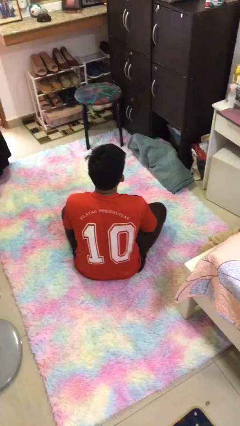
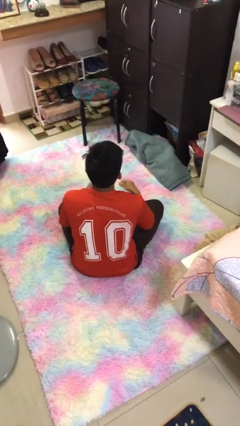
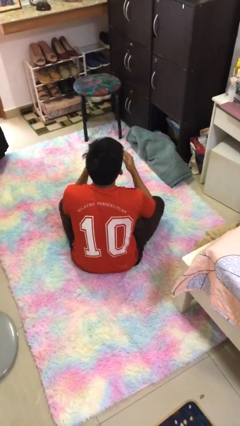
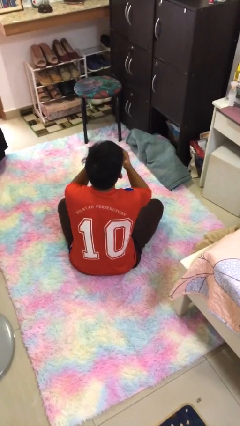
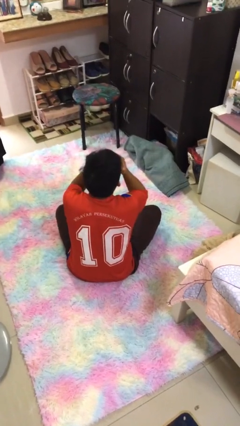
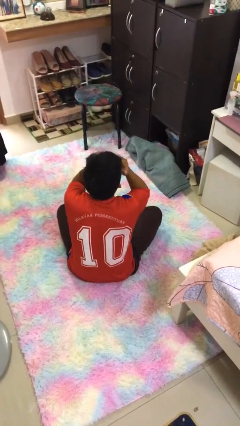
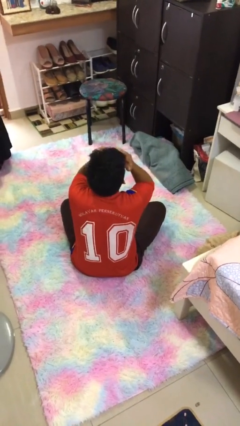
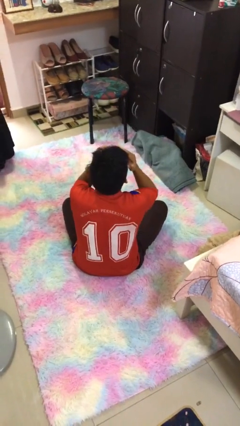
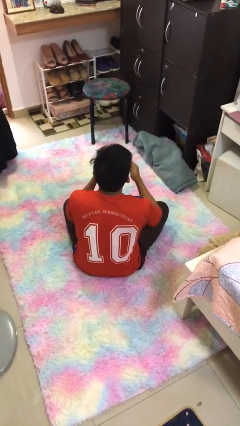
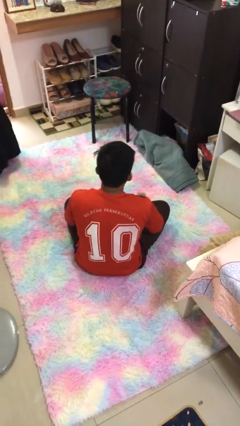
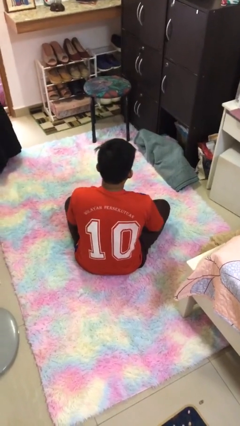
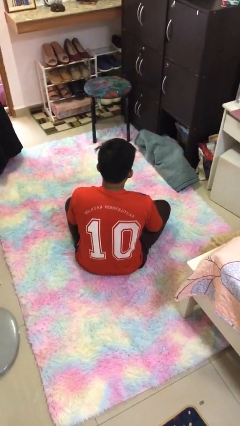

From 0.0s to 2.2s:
person covers face with hands

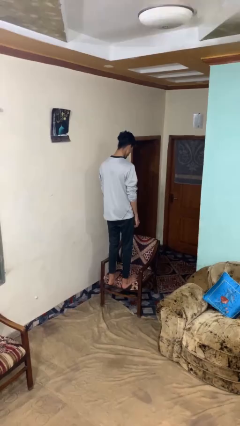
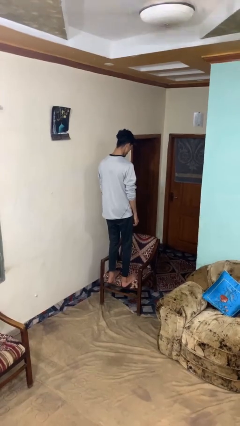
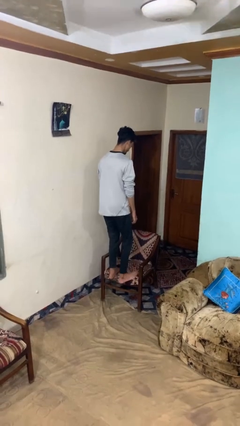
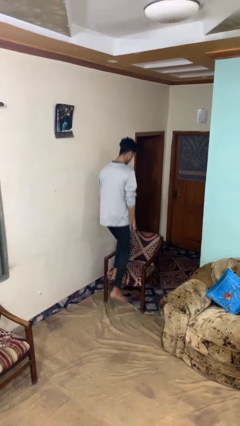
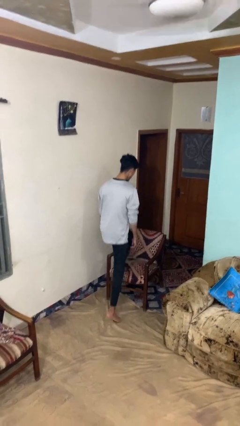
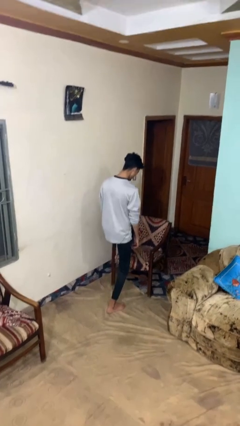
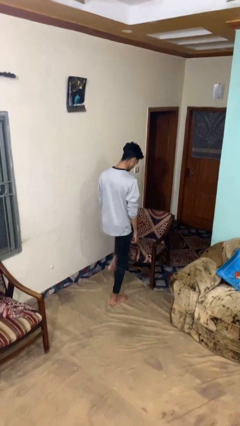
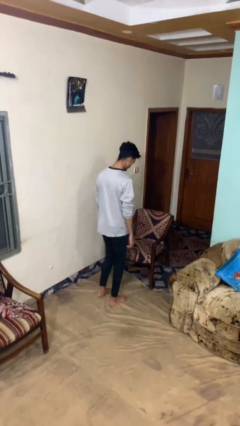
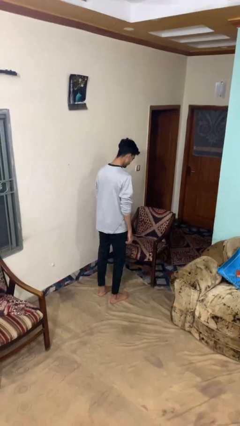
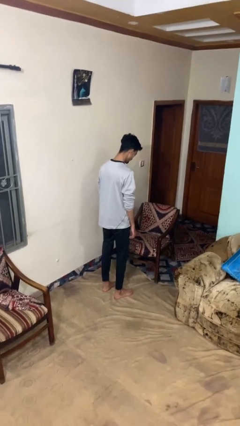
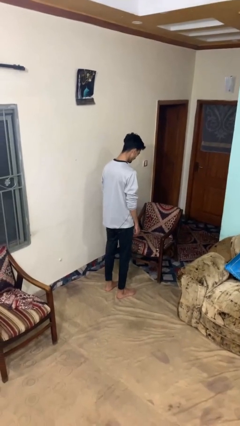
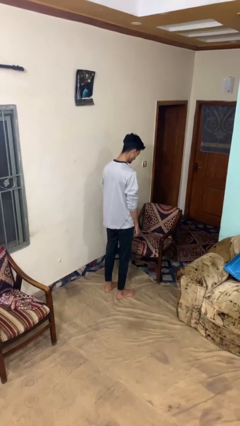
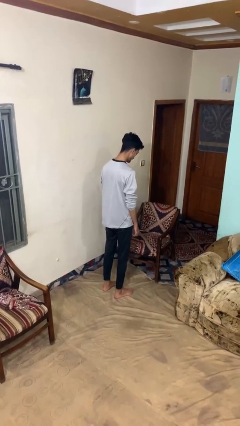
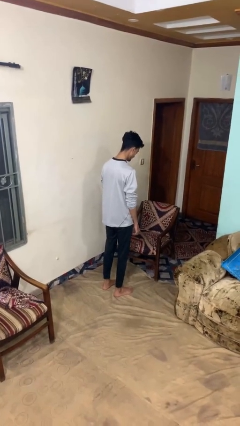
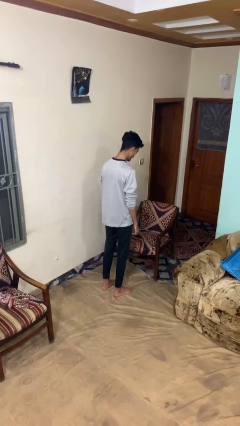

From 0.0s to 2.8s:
person climbs off chair

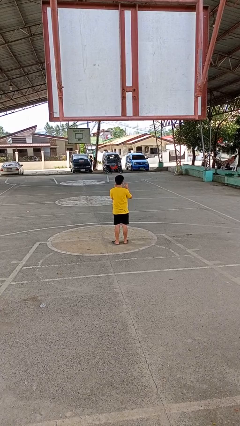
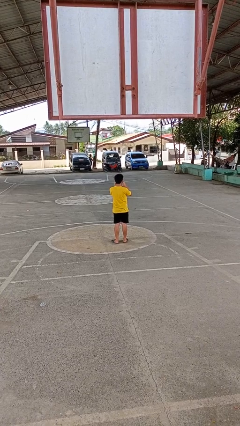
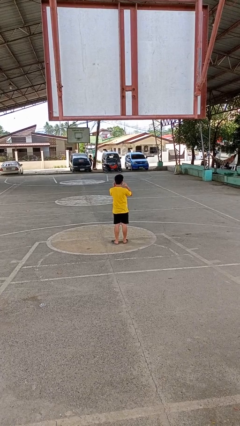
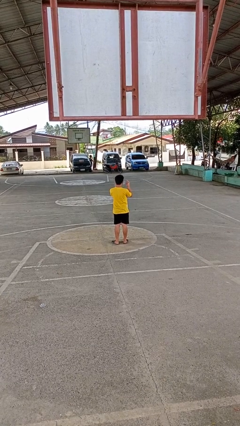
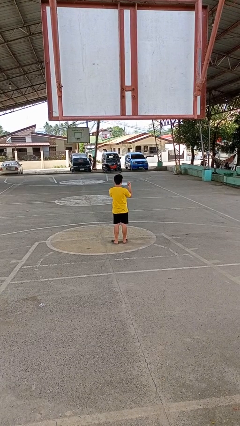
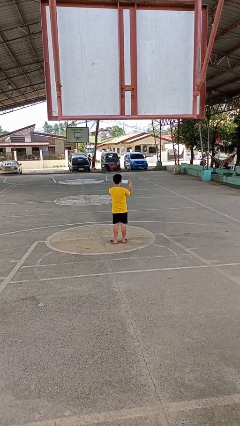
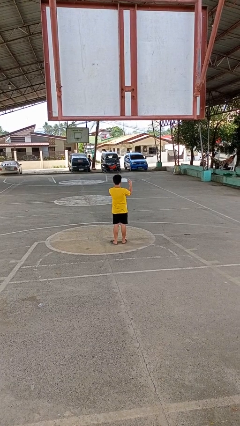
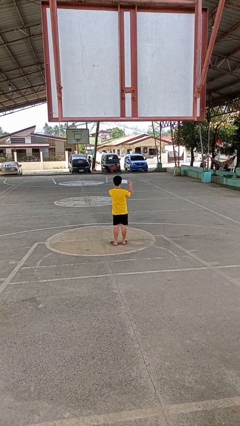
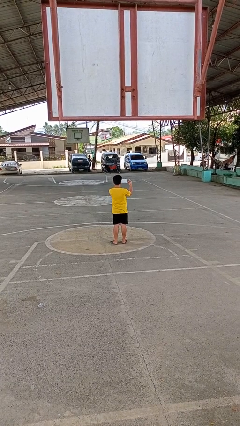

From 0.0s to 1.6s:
person takes off facemask

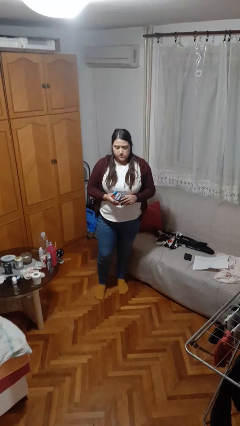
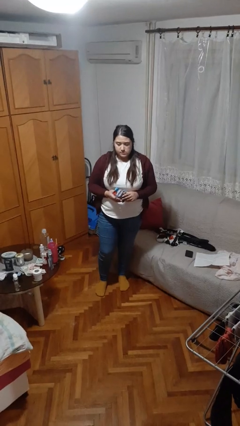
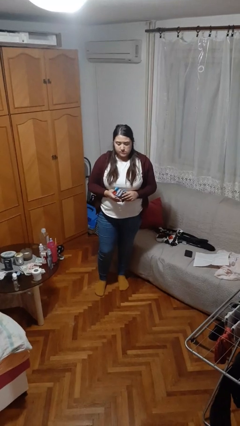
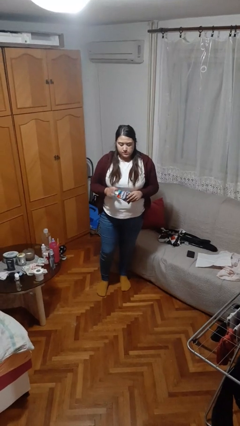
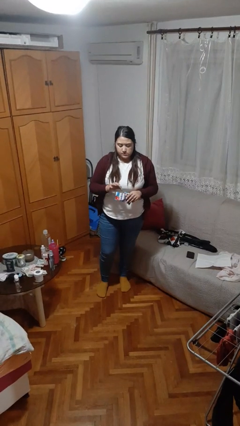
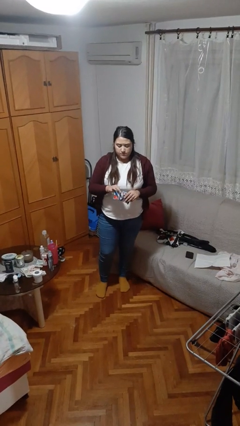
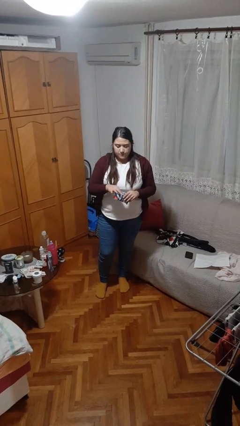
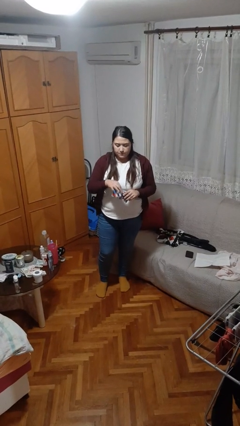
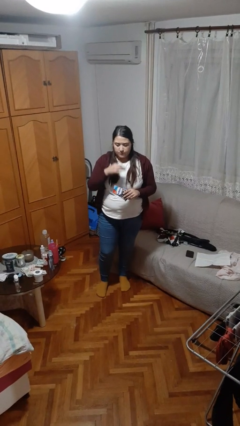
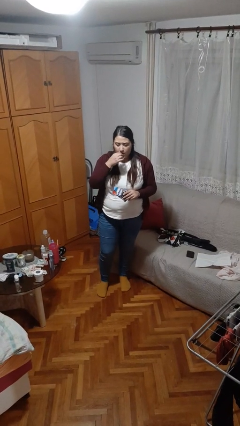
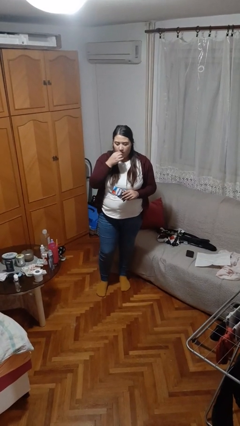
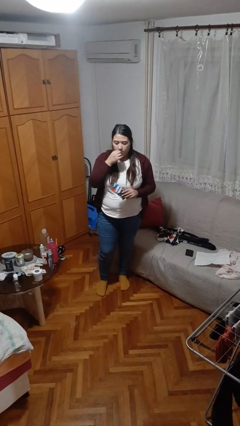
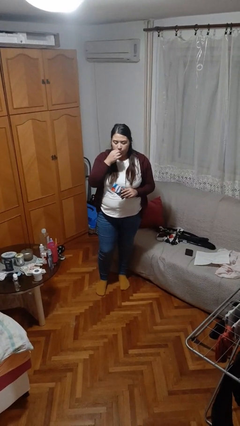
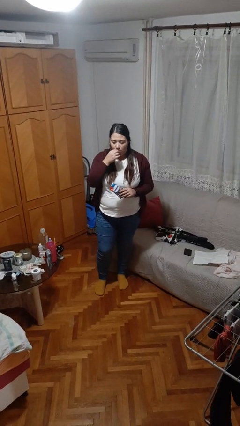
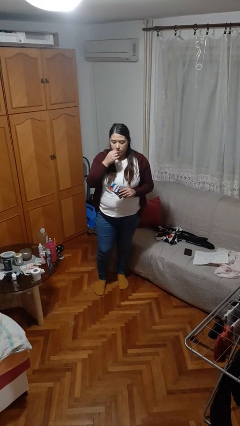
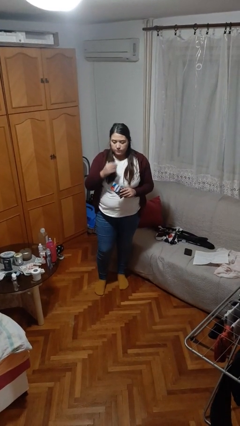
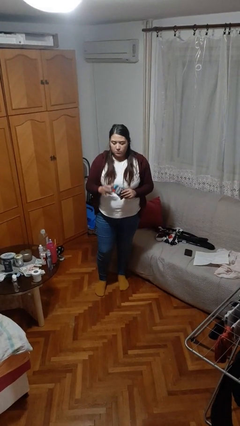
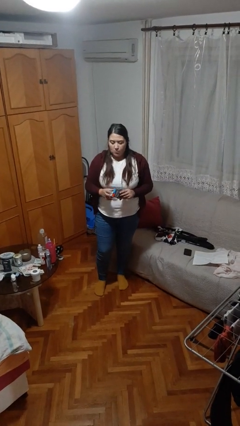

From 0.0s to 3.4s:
person eats snack from bag

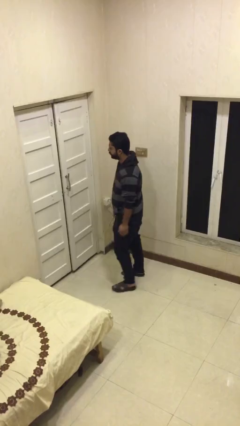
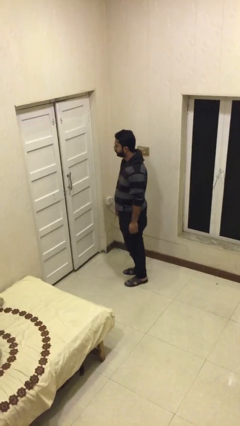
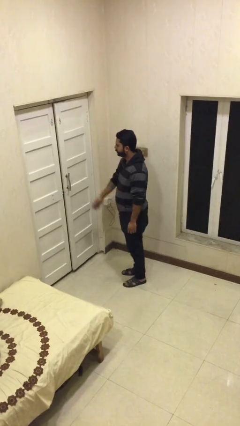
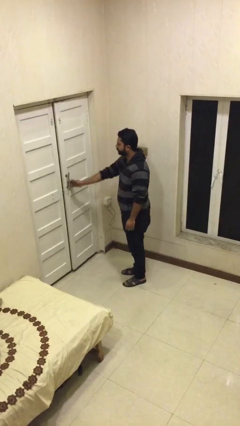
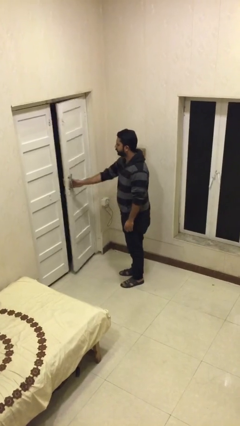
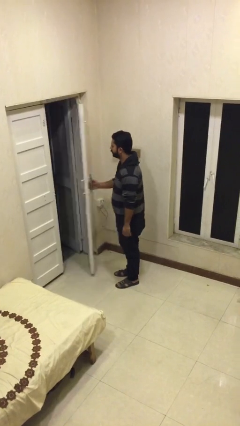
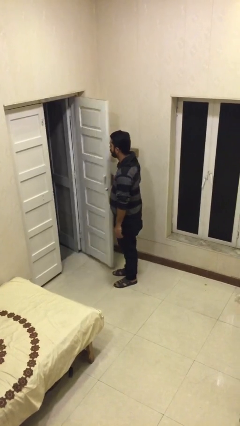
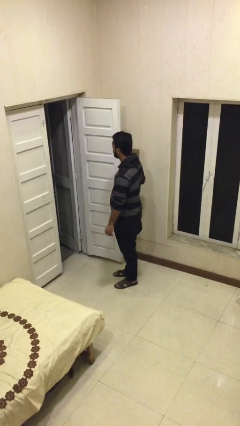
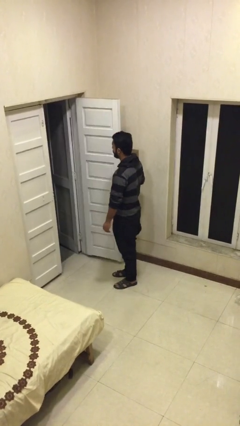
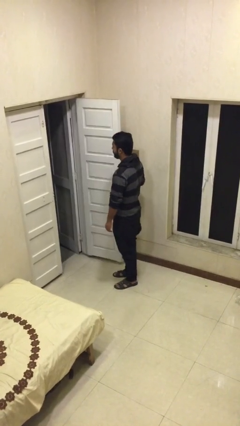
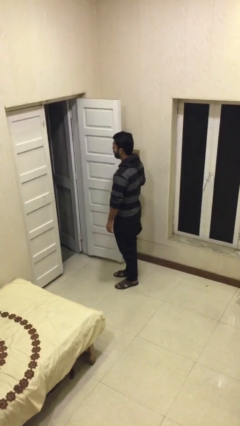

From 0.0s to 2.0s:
person opens facility door

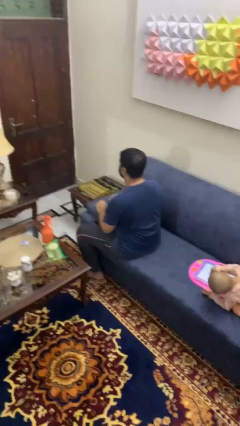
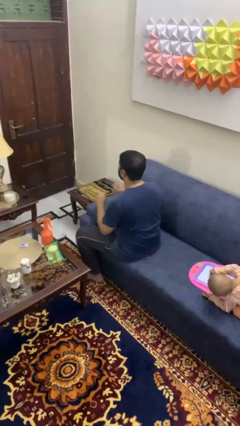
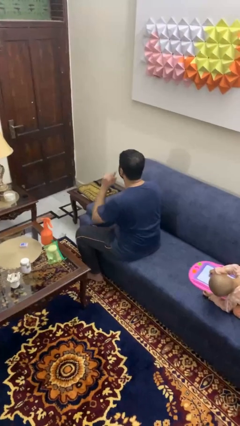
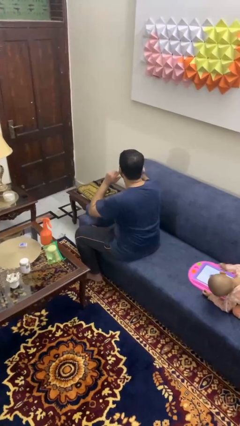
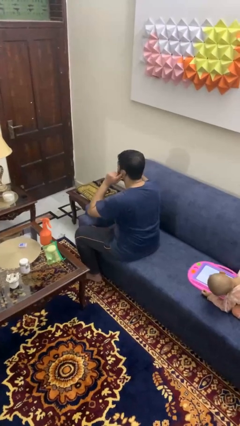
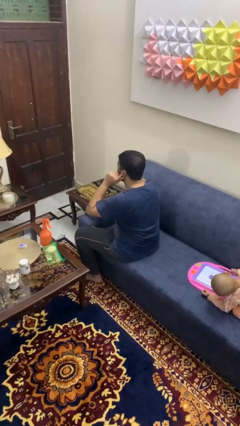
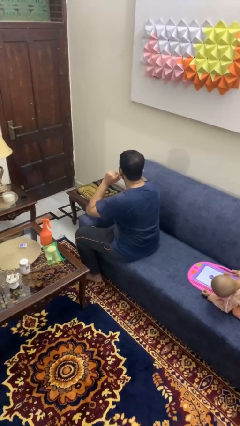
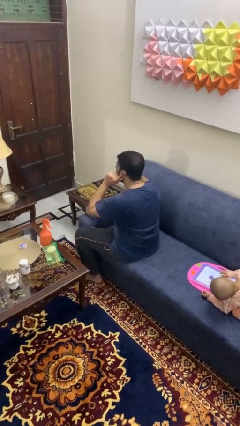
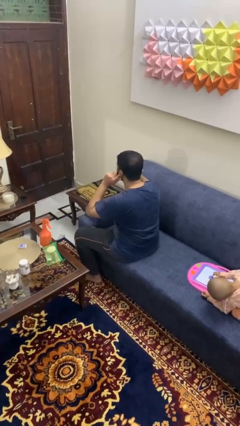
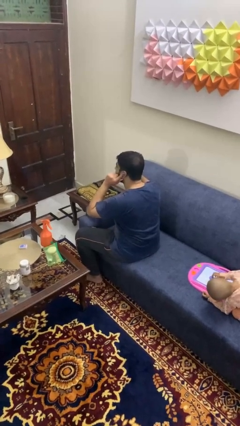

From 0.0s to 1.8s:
person puts fingers in ear

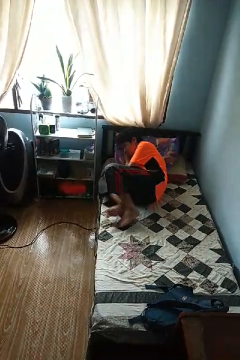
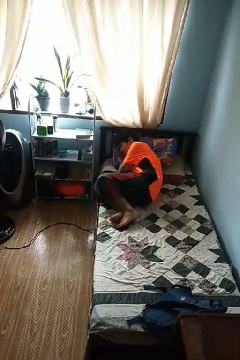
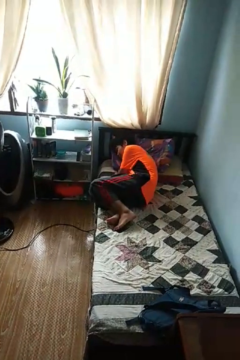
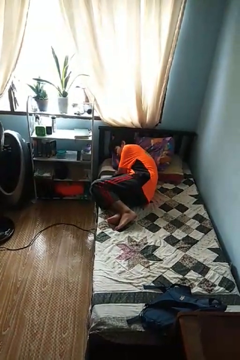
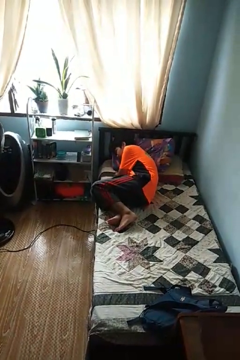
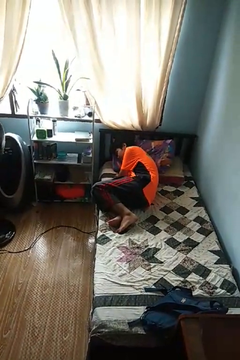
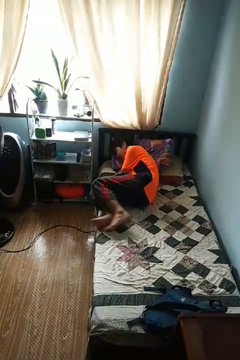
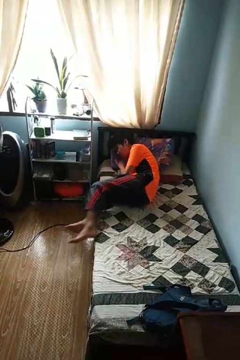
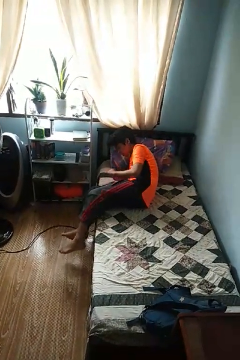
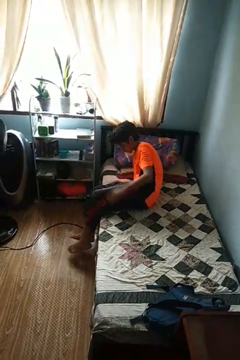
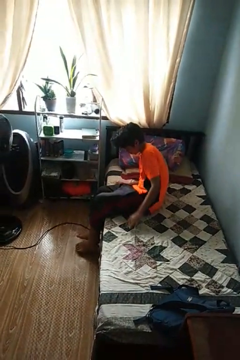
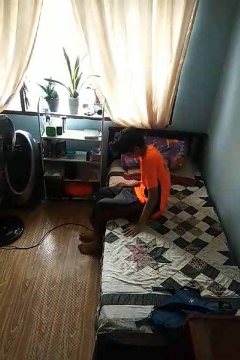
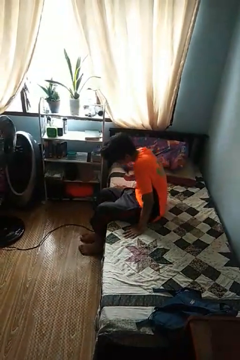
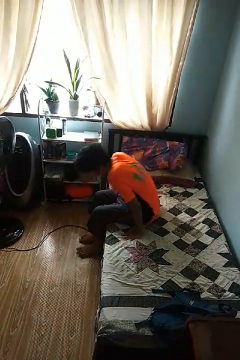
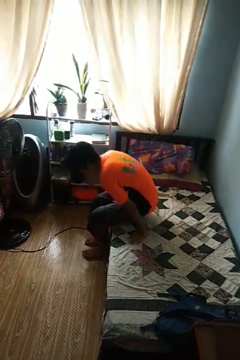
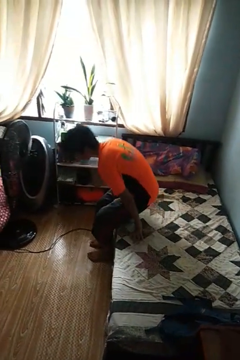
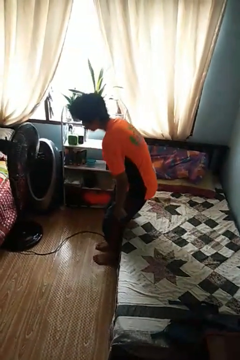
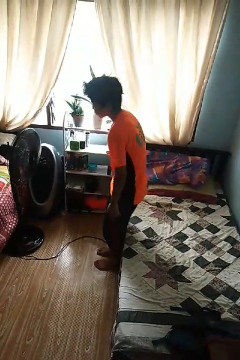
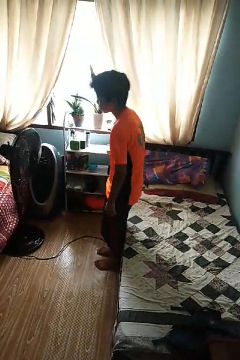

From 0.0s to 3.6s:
person stands up

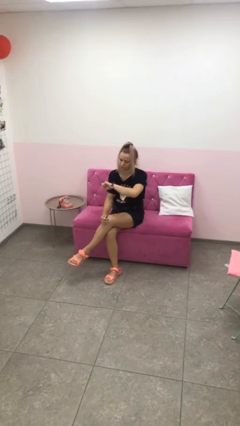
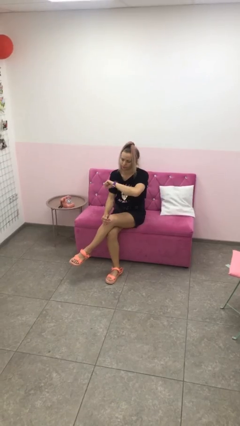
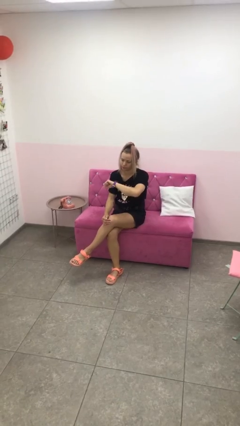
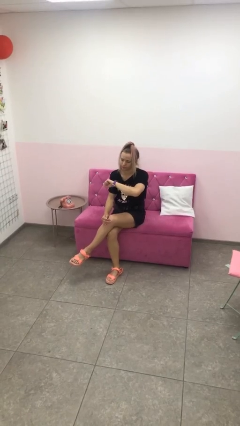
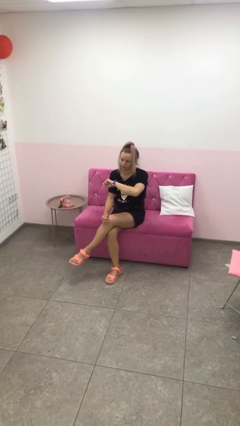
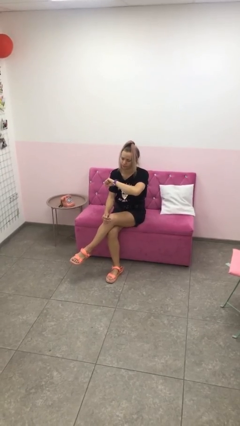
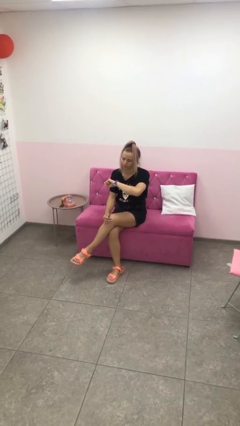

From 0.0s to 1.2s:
person looks at wristwatch
